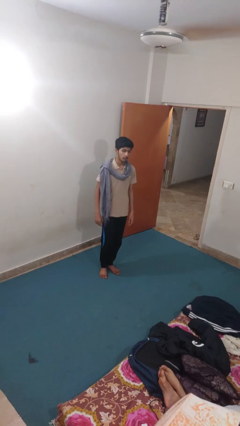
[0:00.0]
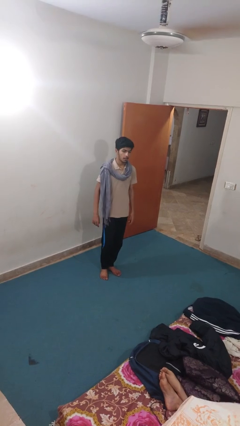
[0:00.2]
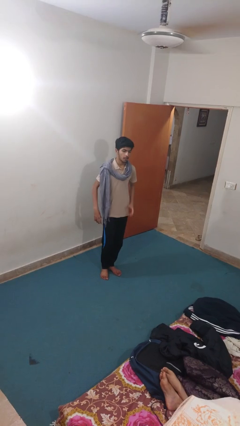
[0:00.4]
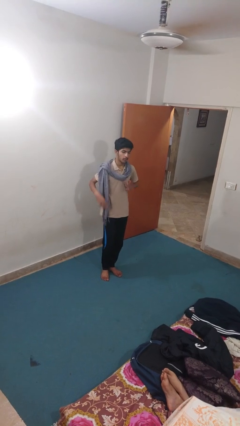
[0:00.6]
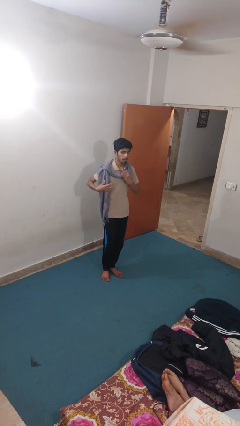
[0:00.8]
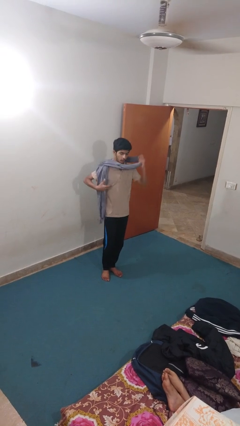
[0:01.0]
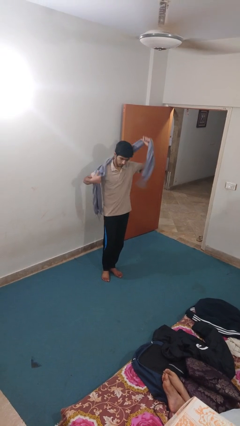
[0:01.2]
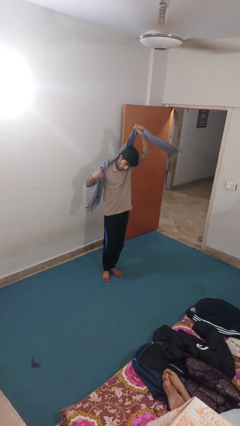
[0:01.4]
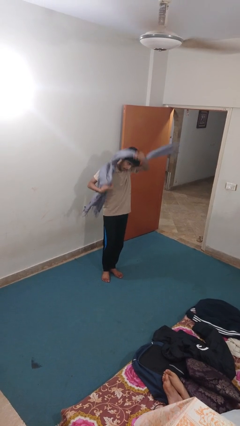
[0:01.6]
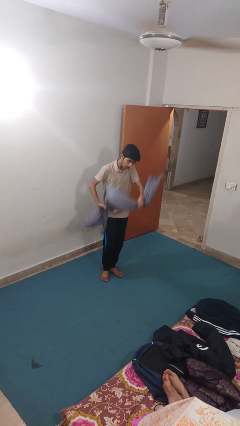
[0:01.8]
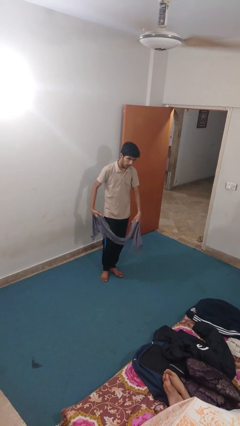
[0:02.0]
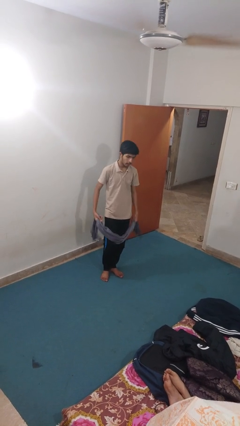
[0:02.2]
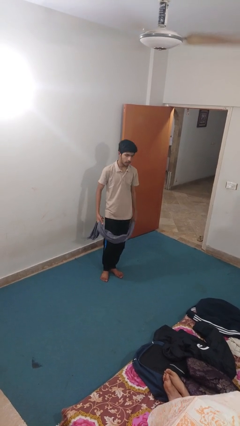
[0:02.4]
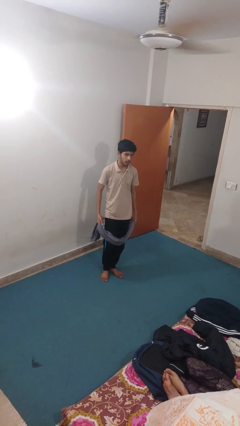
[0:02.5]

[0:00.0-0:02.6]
person takes off scarf

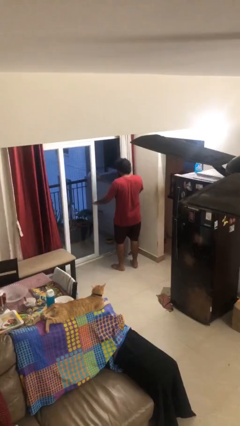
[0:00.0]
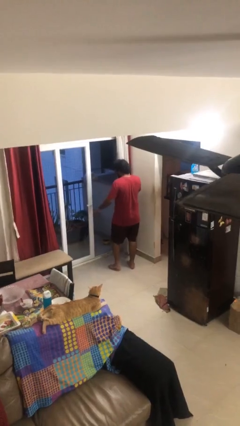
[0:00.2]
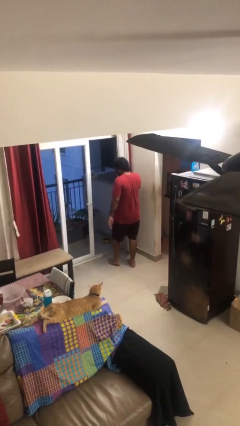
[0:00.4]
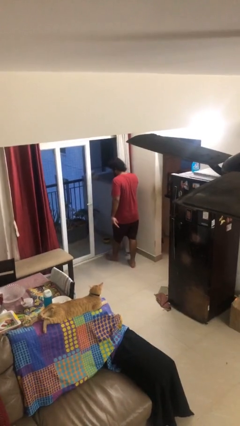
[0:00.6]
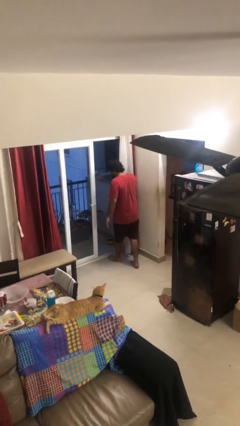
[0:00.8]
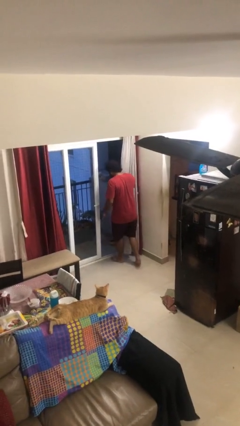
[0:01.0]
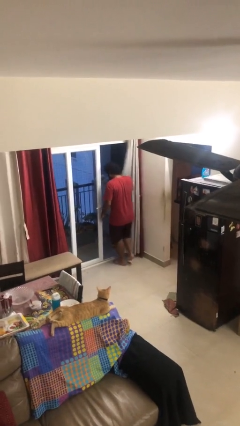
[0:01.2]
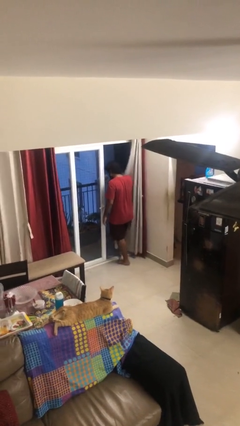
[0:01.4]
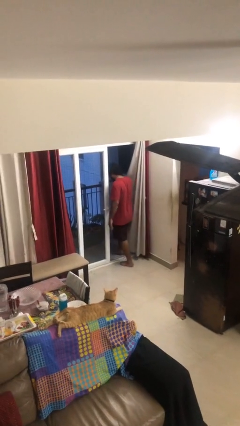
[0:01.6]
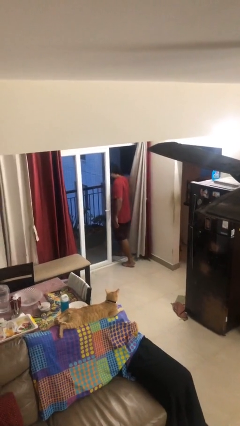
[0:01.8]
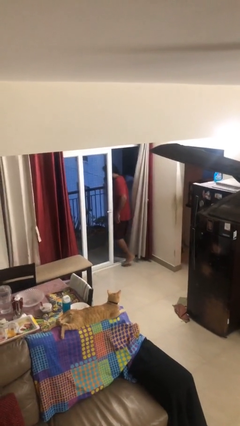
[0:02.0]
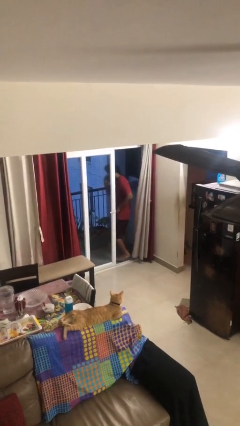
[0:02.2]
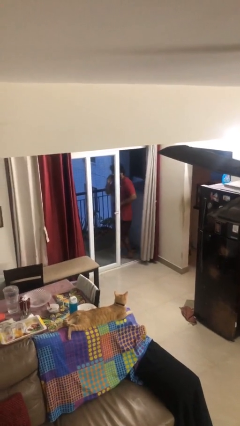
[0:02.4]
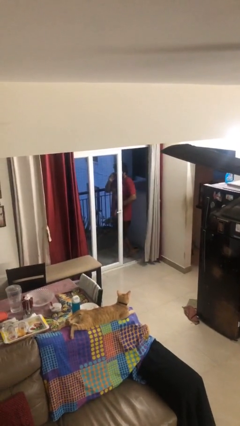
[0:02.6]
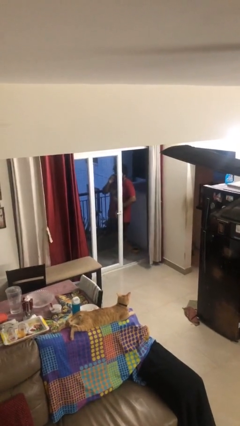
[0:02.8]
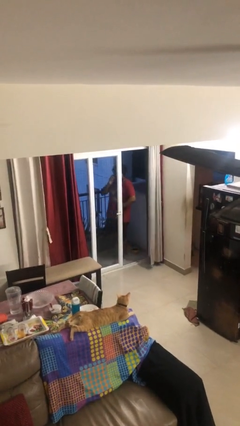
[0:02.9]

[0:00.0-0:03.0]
person exits scene through structure

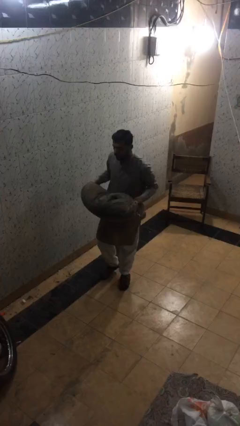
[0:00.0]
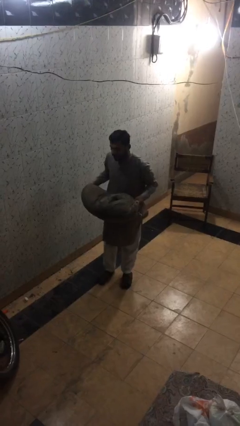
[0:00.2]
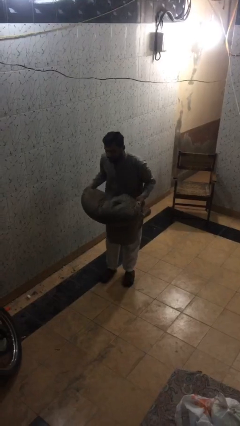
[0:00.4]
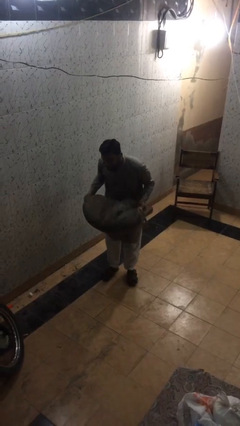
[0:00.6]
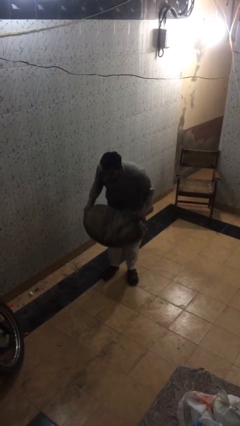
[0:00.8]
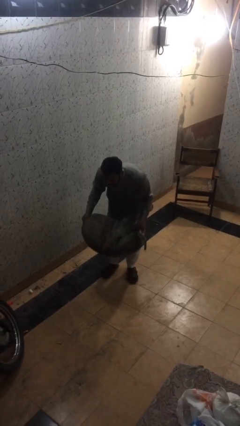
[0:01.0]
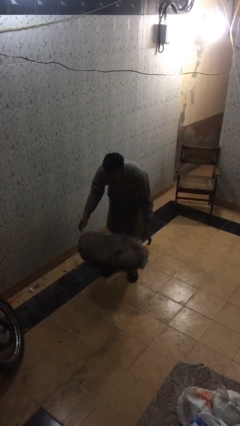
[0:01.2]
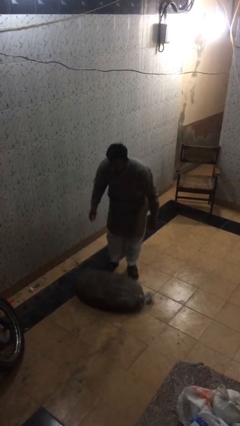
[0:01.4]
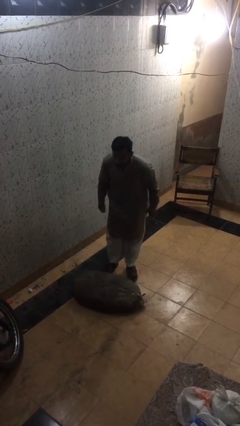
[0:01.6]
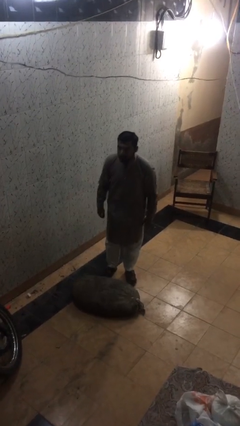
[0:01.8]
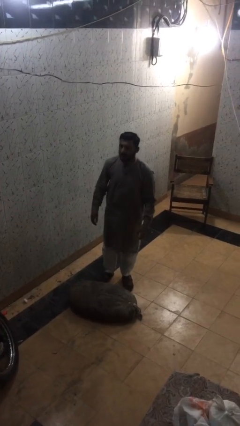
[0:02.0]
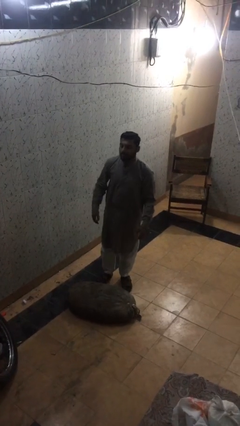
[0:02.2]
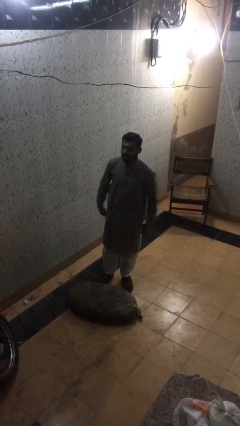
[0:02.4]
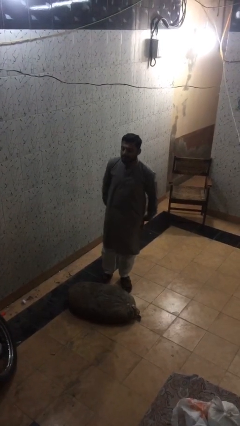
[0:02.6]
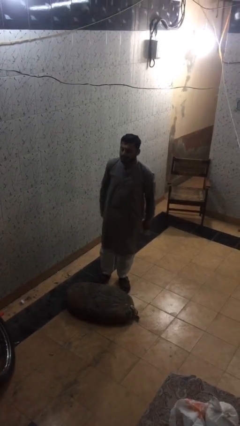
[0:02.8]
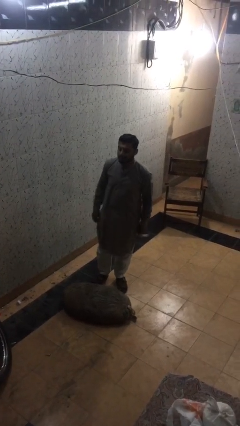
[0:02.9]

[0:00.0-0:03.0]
person puts down object on floor

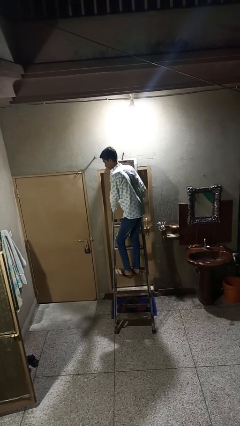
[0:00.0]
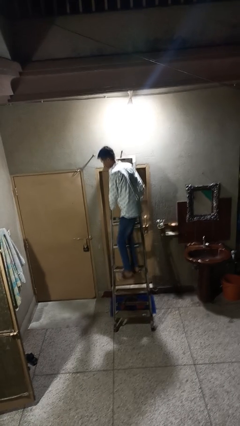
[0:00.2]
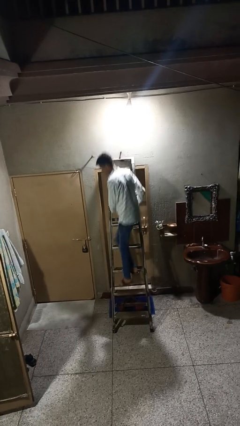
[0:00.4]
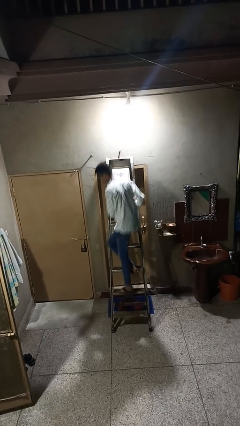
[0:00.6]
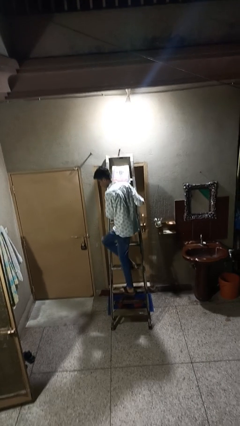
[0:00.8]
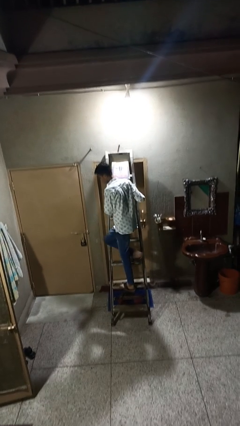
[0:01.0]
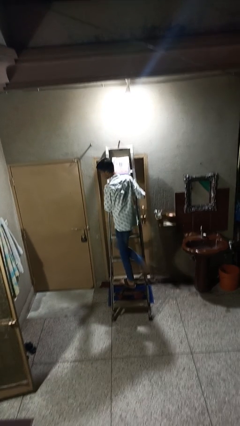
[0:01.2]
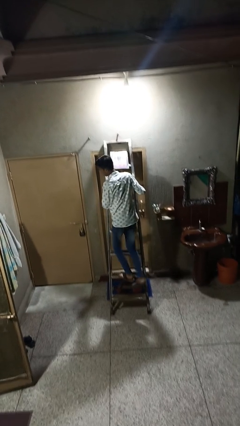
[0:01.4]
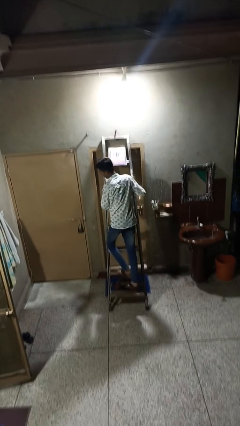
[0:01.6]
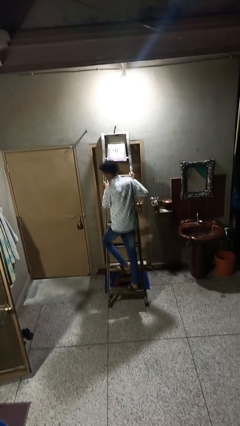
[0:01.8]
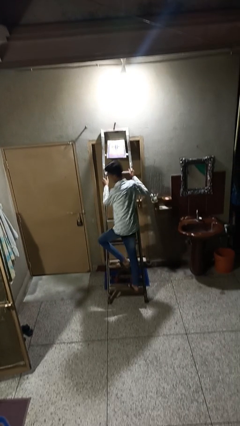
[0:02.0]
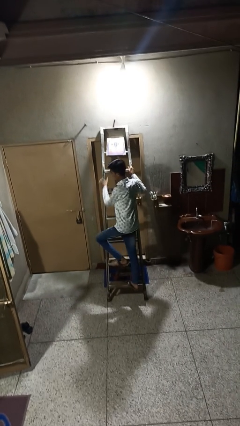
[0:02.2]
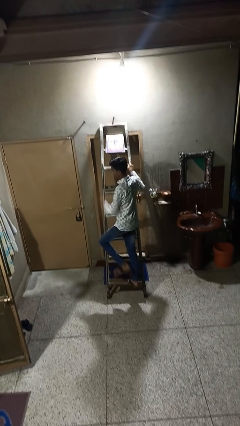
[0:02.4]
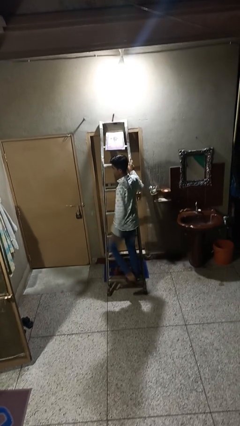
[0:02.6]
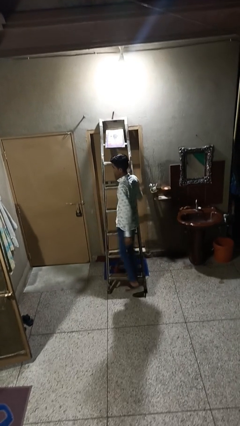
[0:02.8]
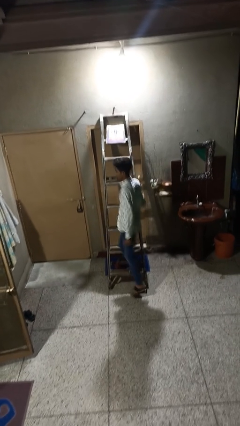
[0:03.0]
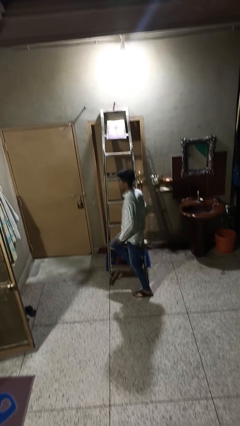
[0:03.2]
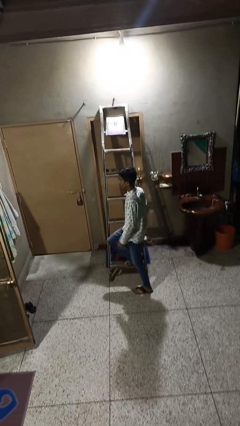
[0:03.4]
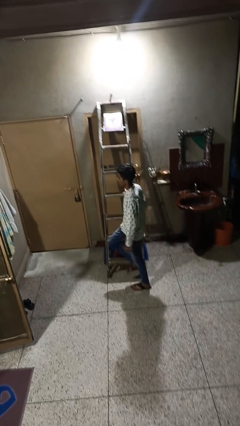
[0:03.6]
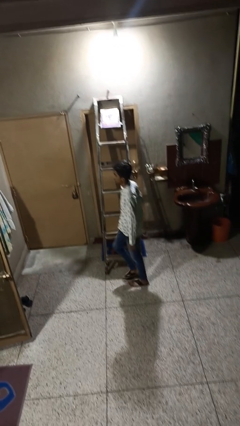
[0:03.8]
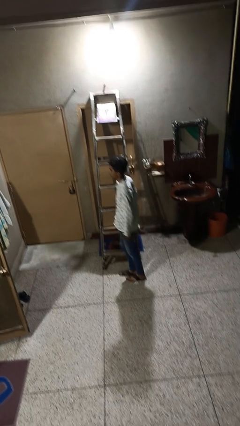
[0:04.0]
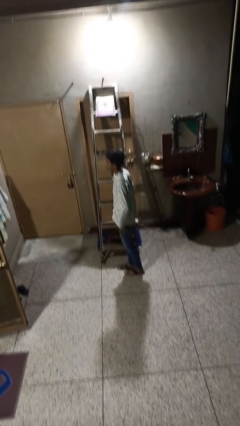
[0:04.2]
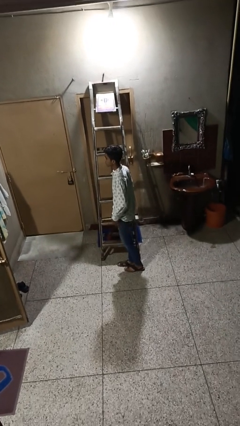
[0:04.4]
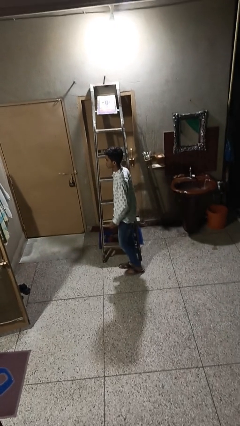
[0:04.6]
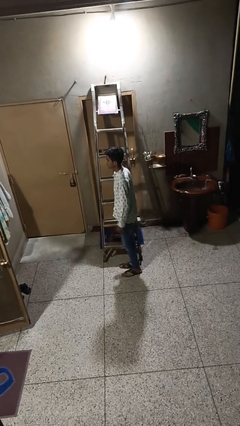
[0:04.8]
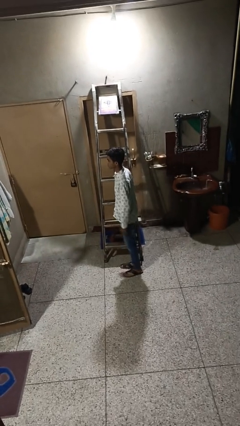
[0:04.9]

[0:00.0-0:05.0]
person climbs down ladder

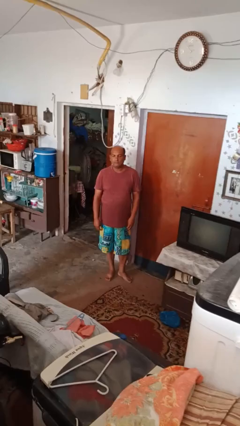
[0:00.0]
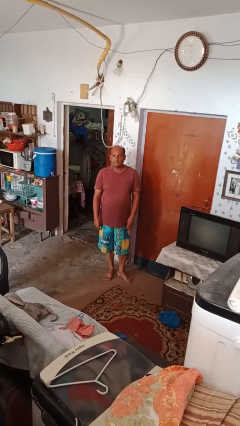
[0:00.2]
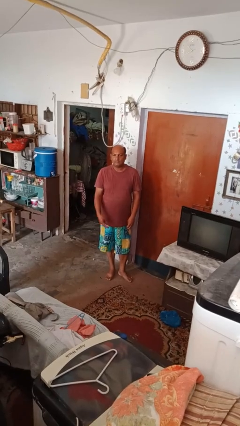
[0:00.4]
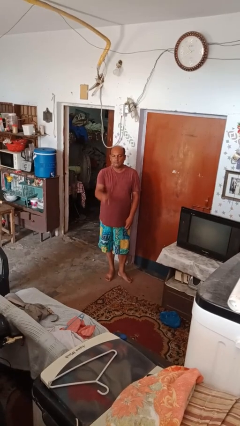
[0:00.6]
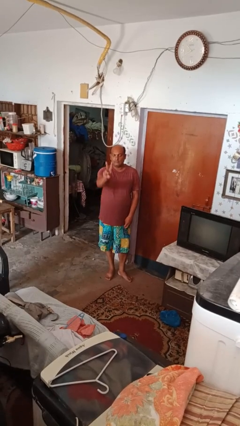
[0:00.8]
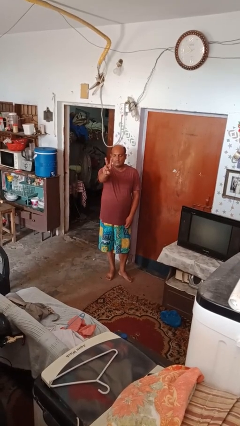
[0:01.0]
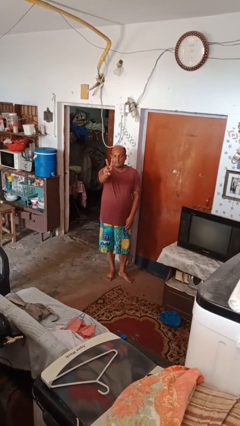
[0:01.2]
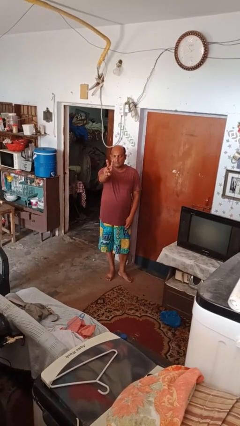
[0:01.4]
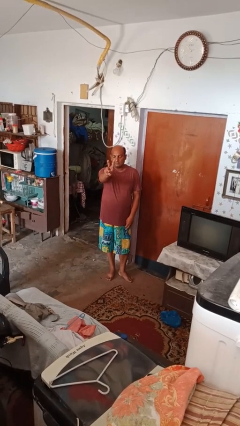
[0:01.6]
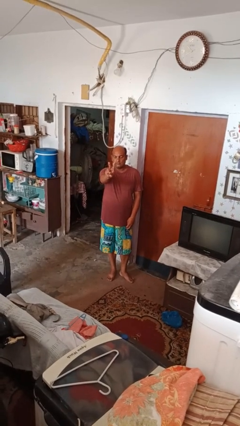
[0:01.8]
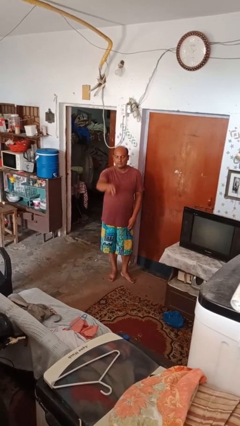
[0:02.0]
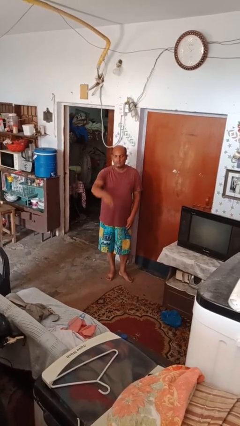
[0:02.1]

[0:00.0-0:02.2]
person gestures peace

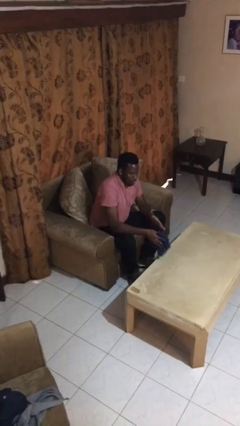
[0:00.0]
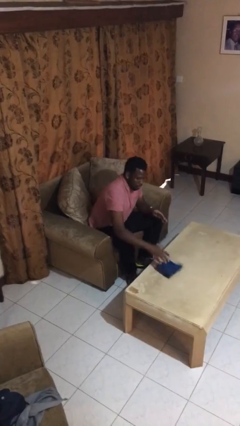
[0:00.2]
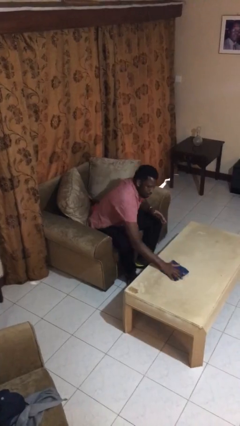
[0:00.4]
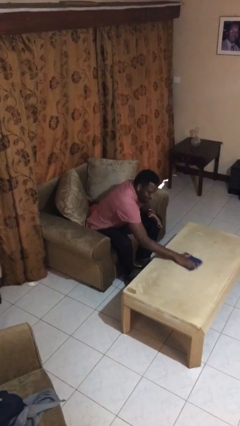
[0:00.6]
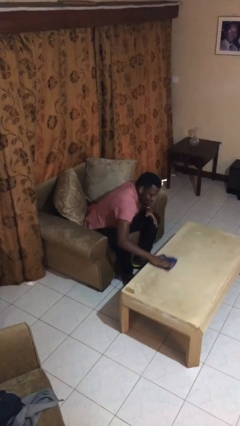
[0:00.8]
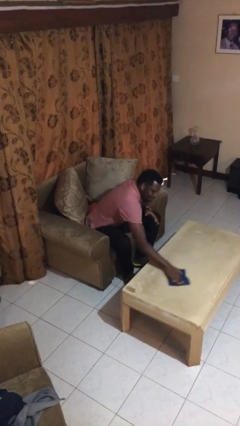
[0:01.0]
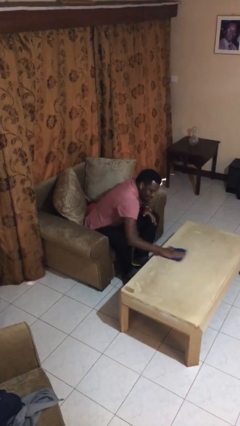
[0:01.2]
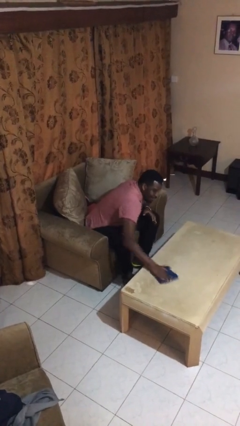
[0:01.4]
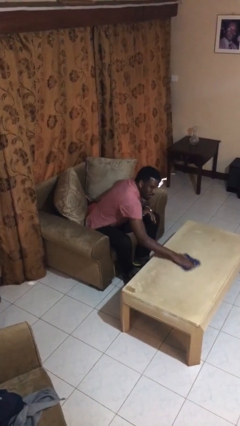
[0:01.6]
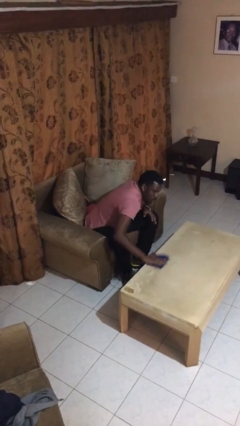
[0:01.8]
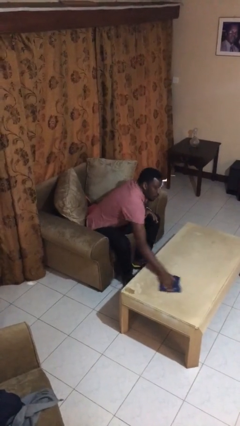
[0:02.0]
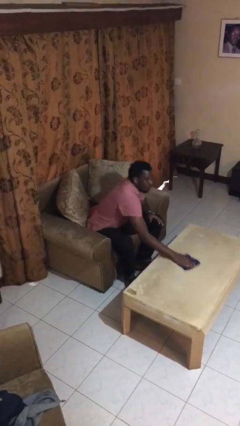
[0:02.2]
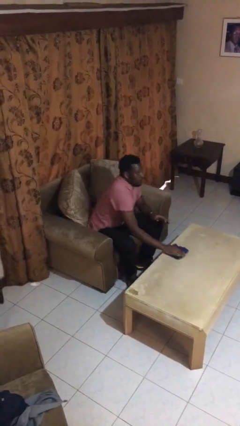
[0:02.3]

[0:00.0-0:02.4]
person cleans table with rag
